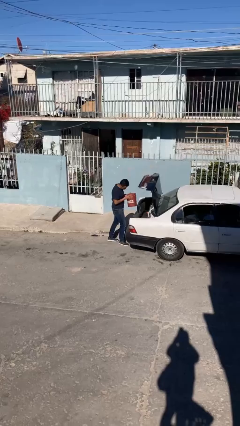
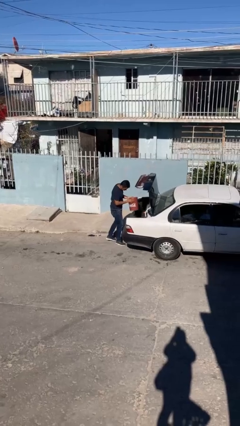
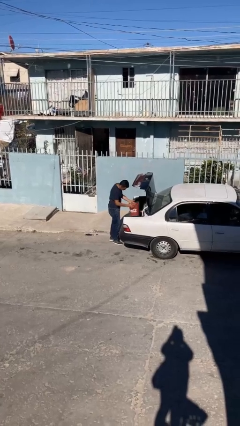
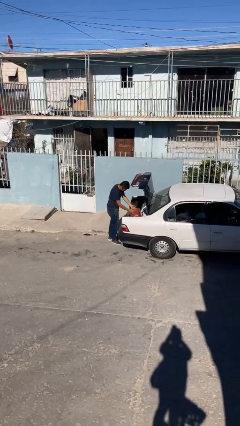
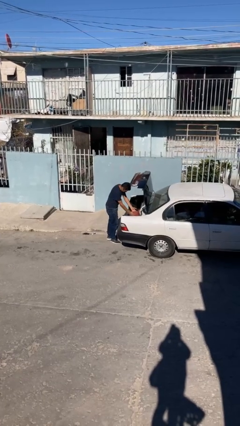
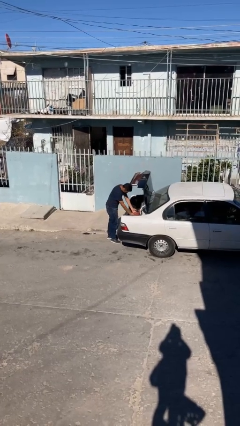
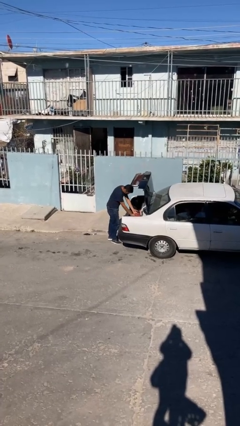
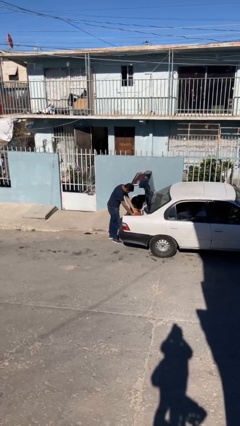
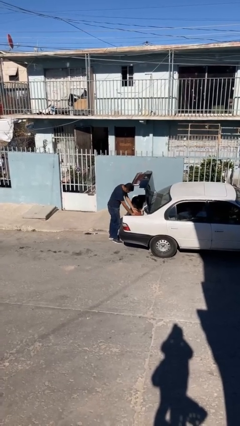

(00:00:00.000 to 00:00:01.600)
person loads car

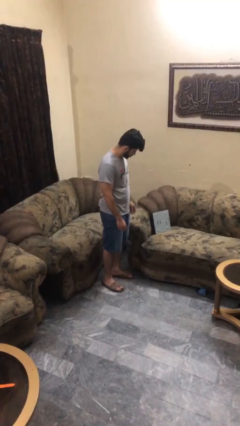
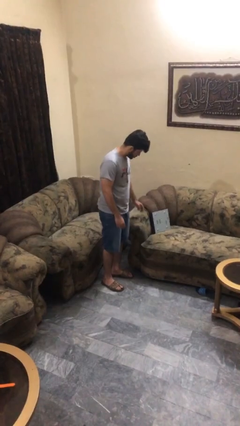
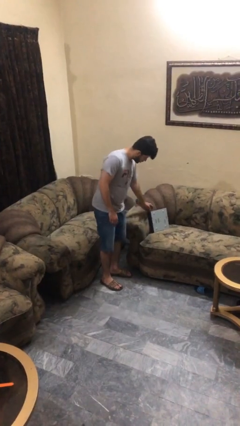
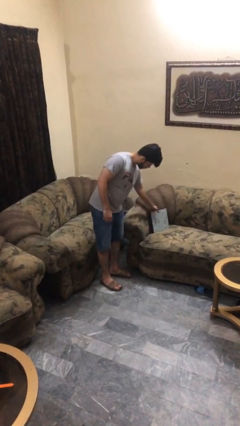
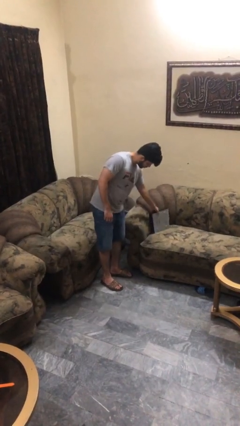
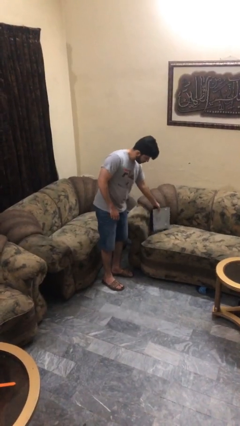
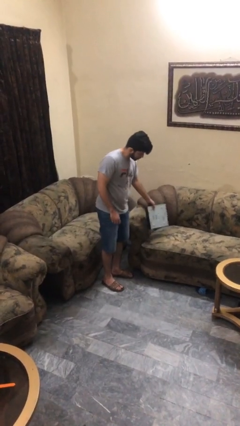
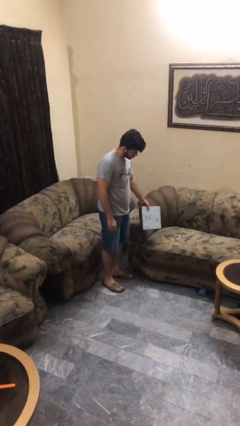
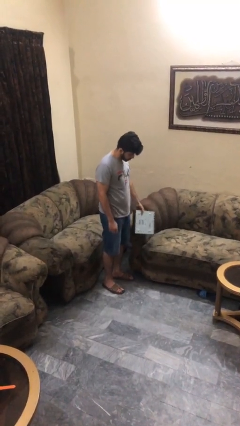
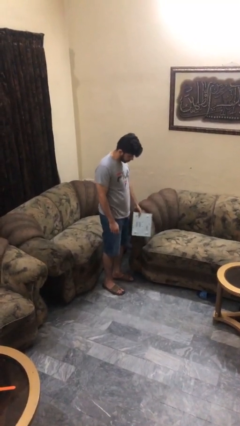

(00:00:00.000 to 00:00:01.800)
person picks up object from couch

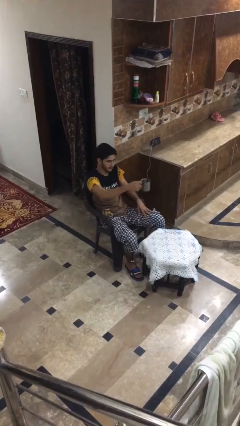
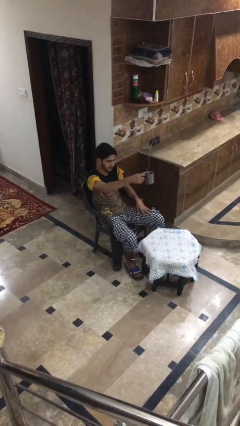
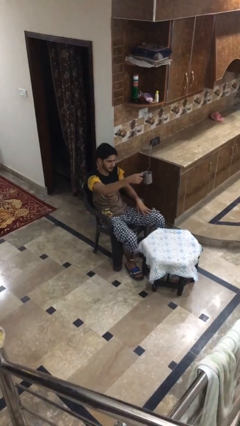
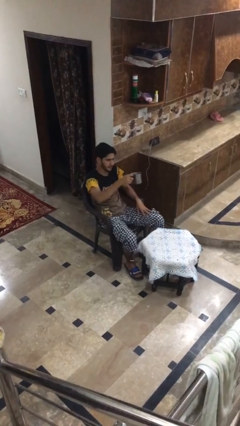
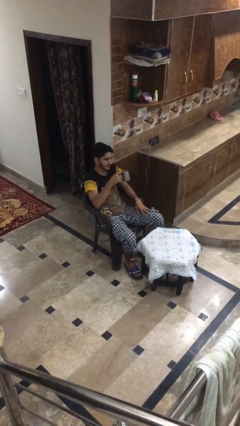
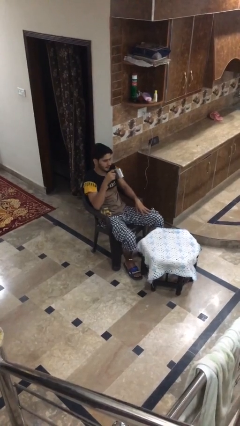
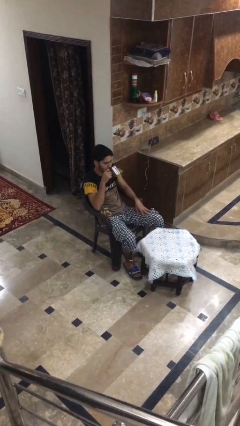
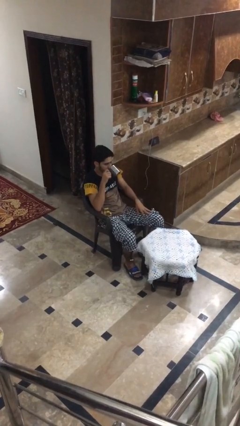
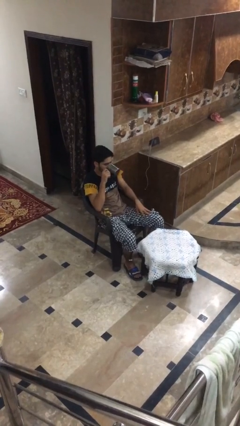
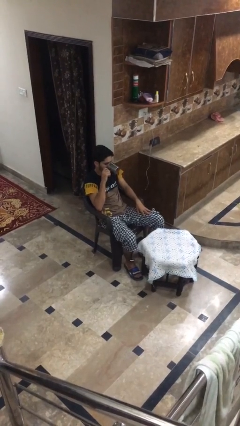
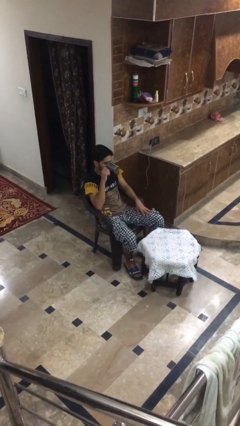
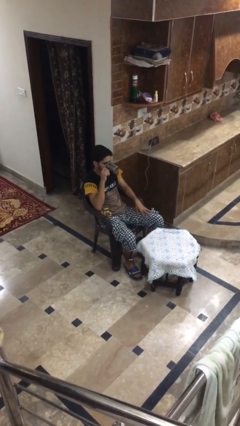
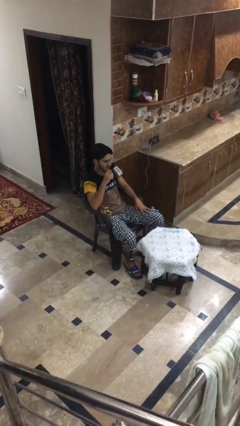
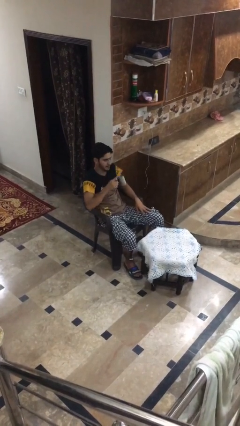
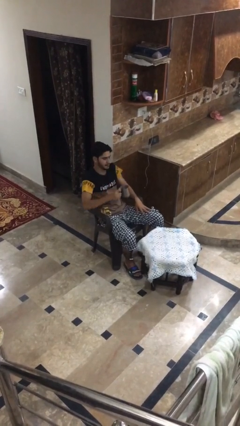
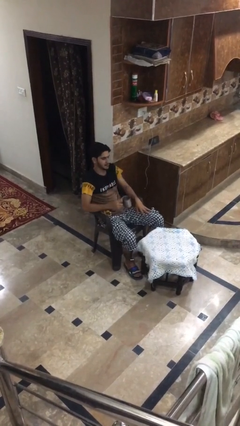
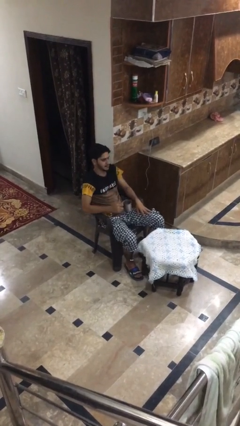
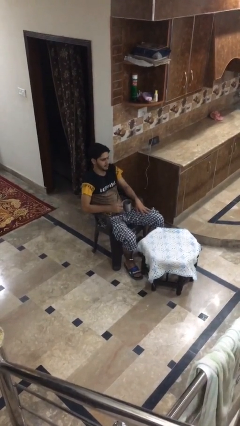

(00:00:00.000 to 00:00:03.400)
person drinks from shotglass

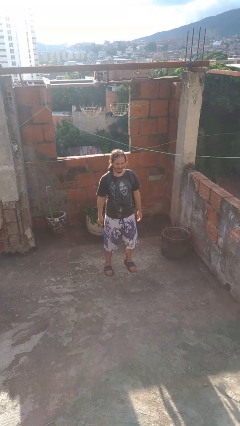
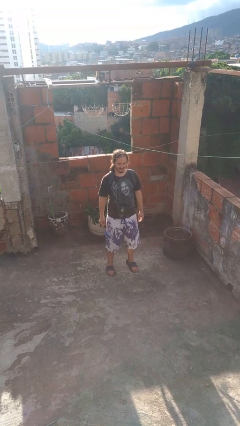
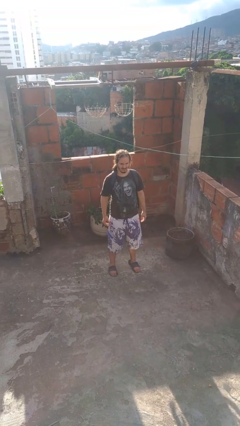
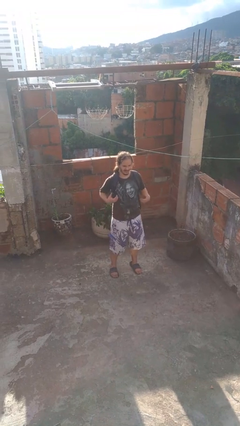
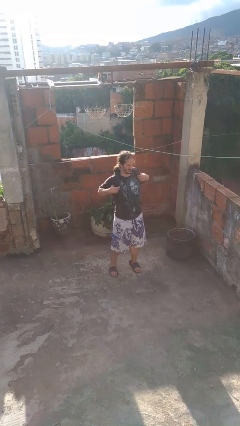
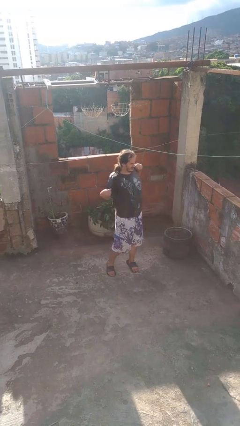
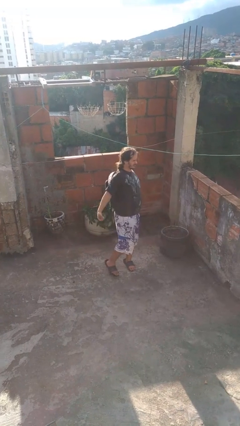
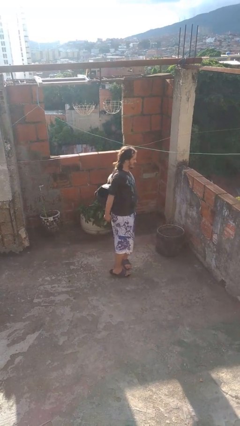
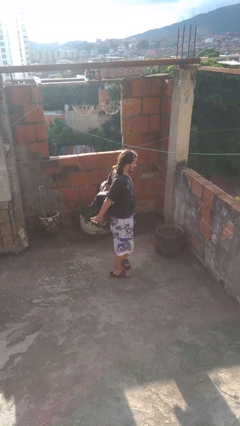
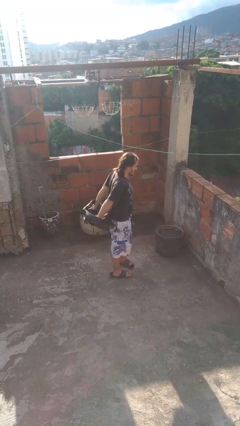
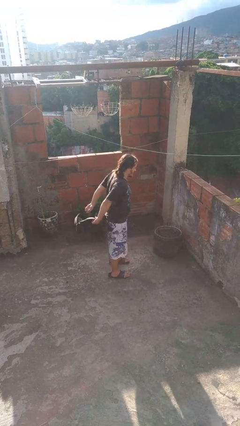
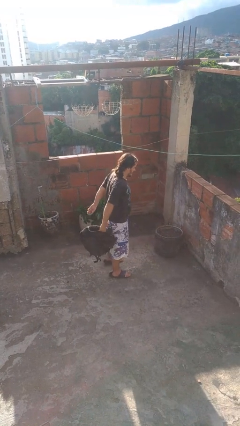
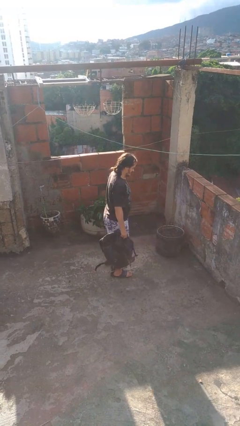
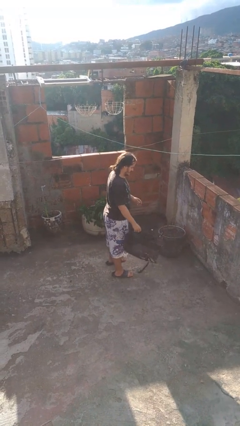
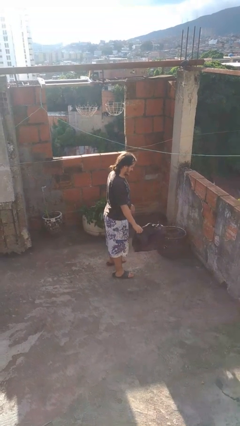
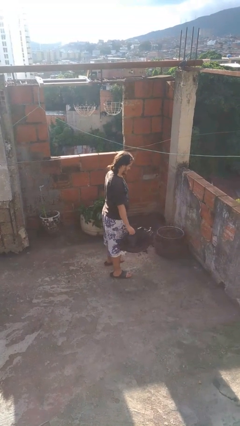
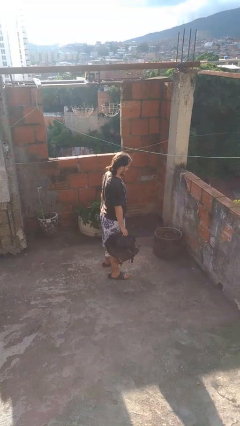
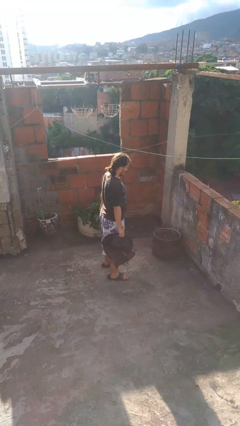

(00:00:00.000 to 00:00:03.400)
person takes off backpack

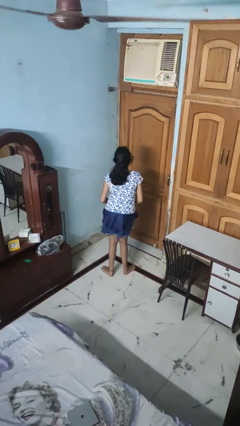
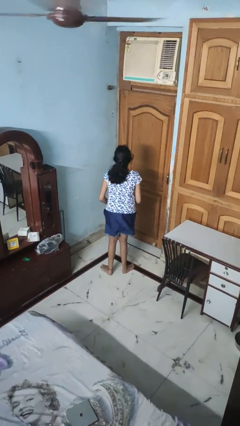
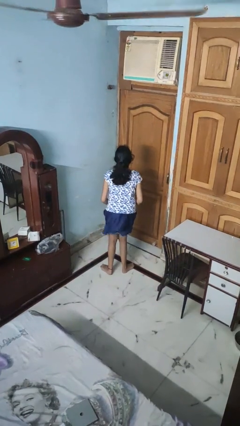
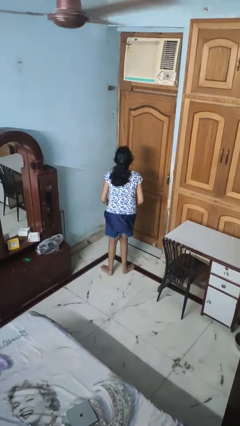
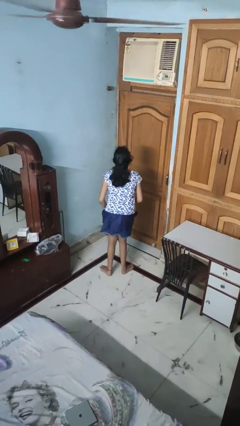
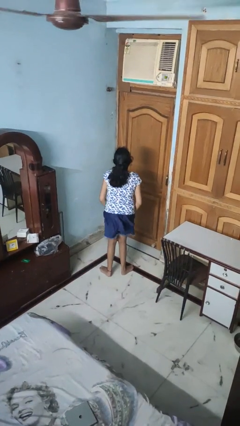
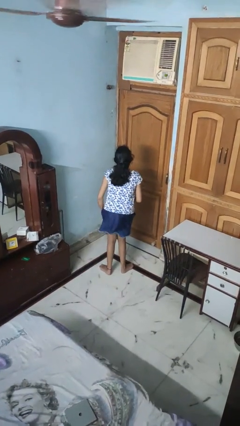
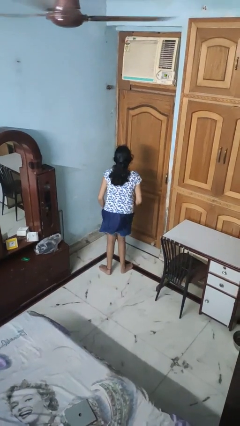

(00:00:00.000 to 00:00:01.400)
person wiggles hips

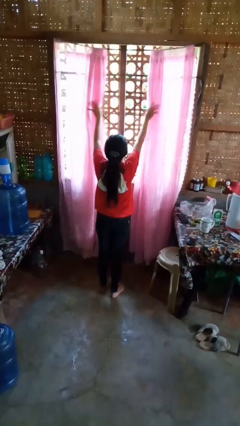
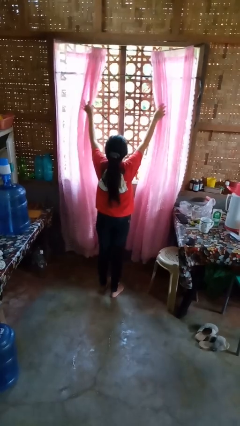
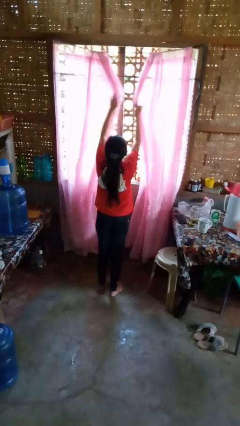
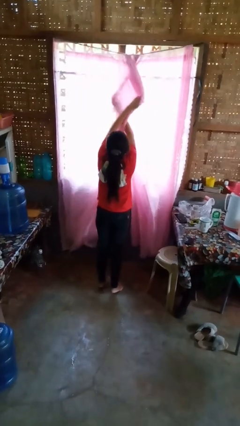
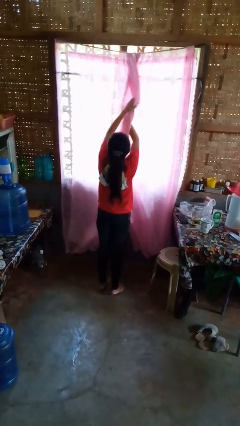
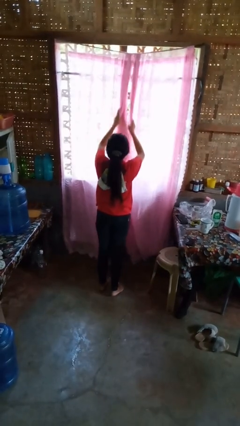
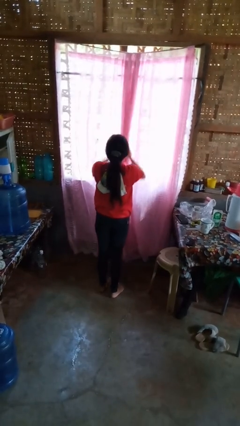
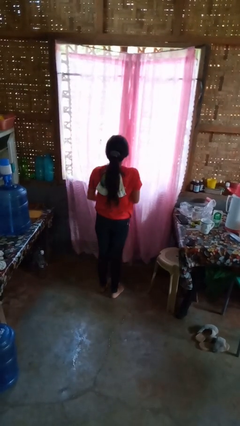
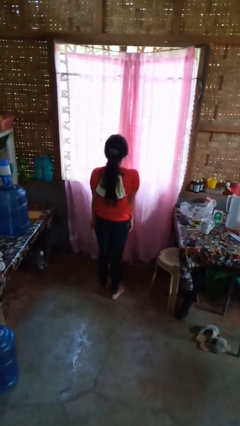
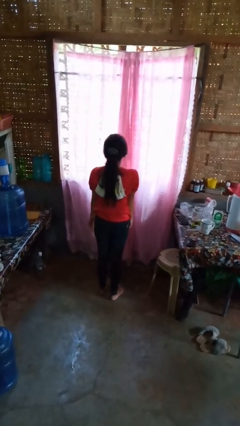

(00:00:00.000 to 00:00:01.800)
person closes curtains

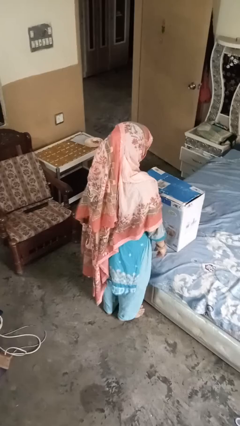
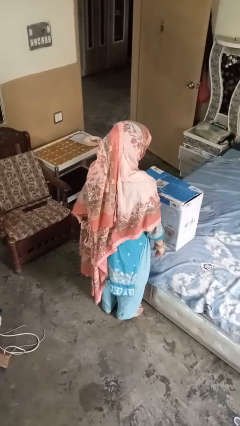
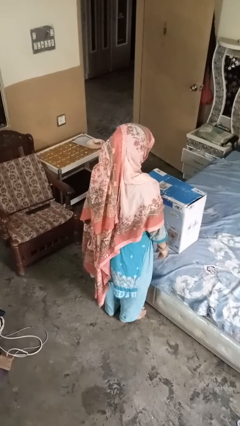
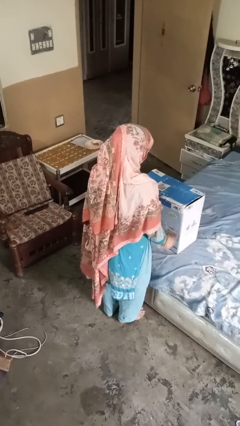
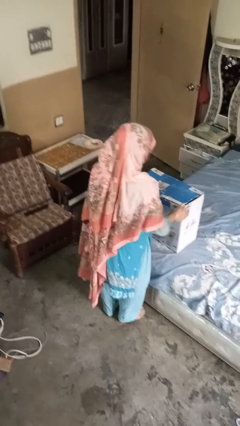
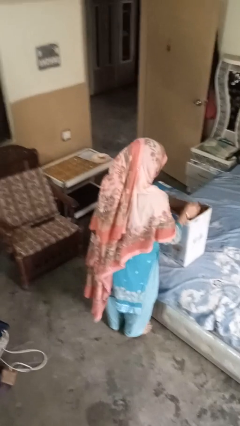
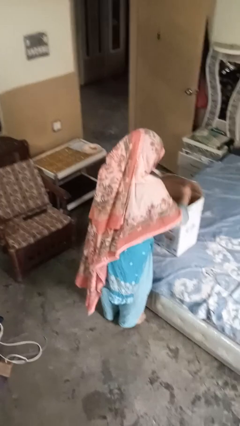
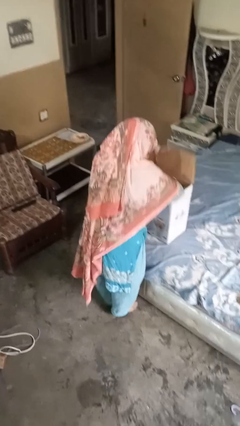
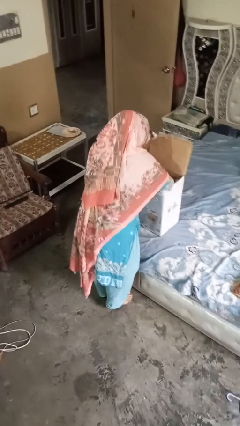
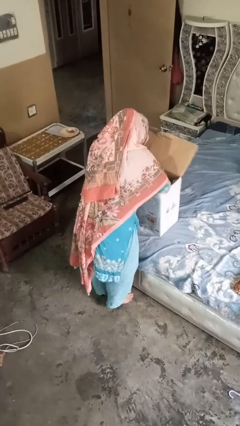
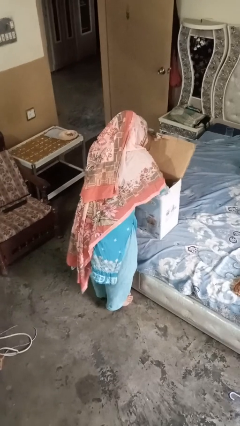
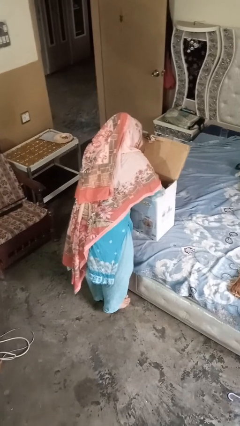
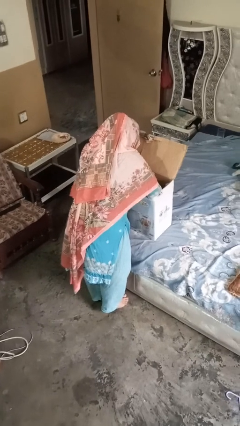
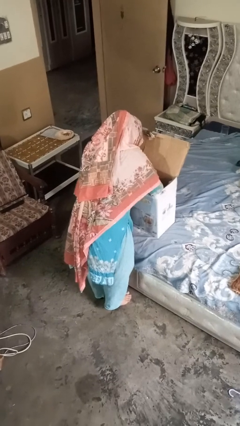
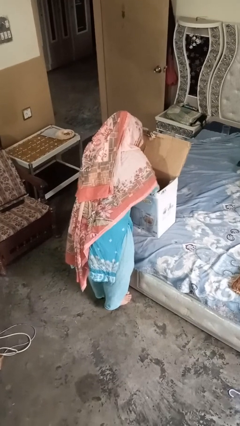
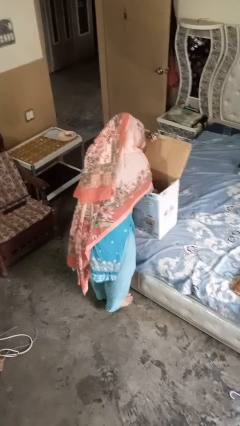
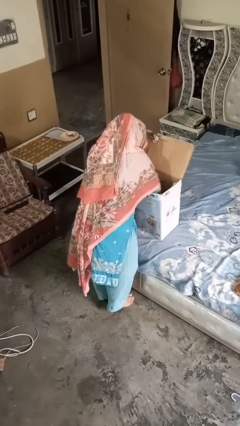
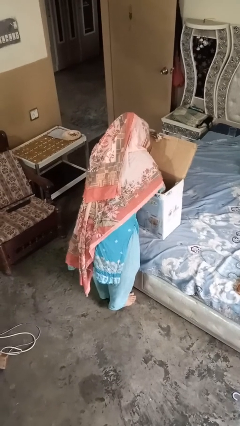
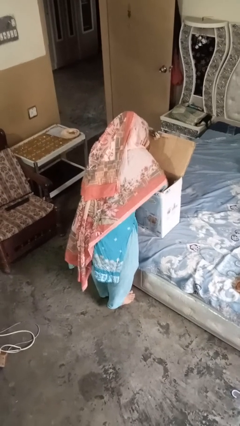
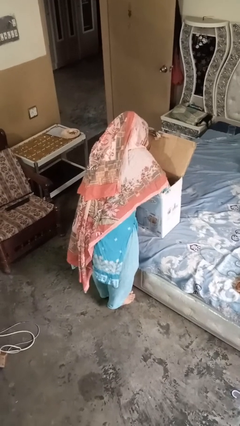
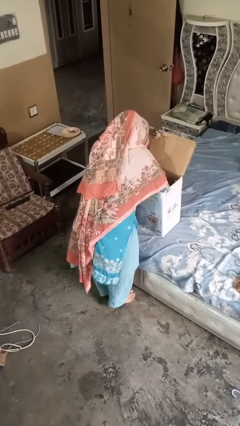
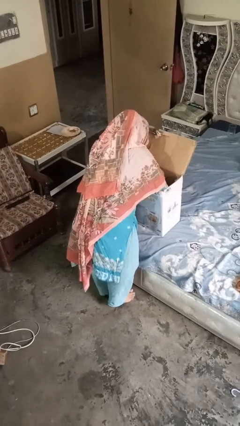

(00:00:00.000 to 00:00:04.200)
person searches in box
